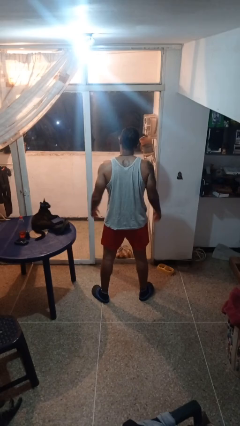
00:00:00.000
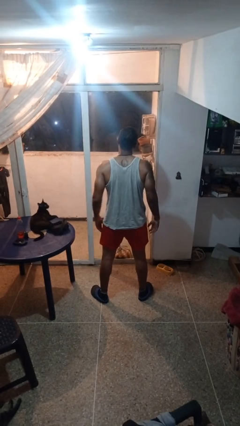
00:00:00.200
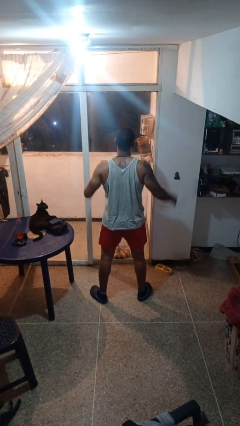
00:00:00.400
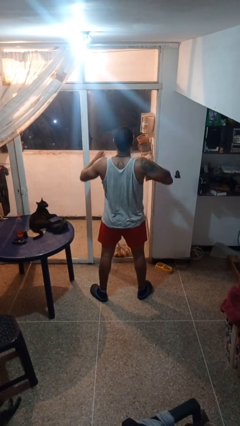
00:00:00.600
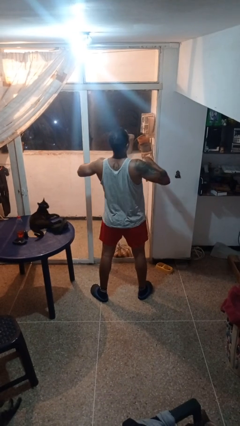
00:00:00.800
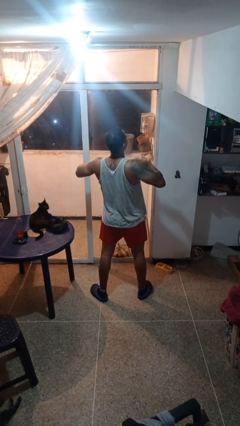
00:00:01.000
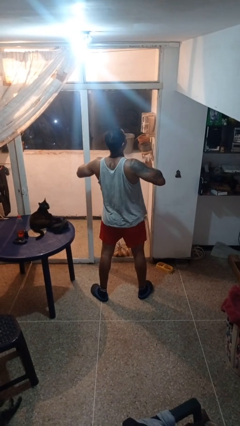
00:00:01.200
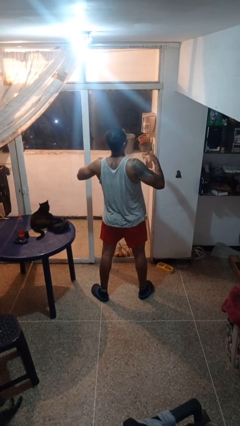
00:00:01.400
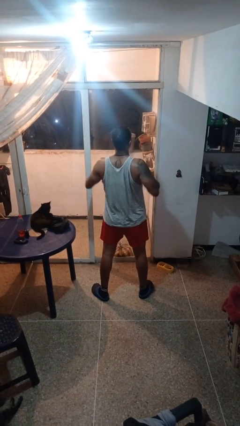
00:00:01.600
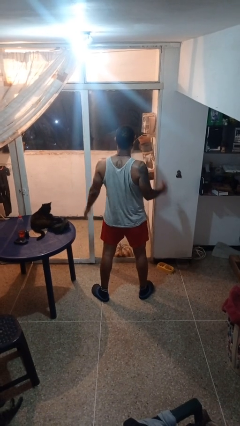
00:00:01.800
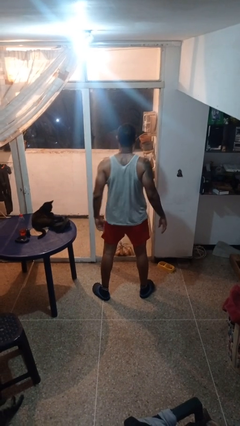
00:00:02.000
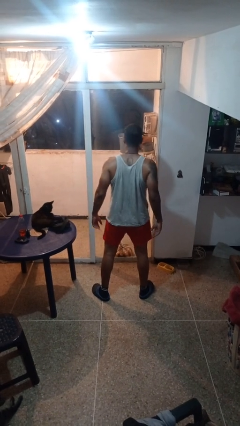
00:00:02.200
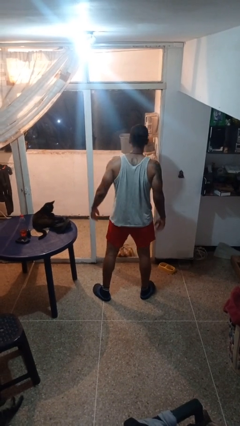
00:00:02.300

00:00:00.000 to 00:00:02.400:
person drums on chest

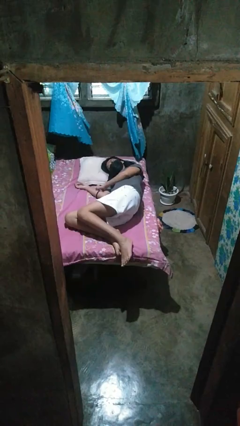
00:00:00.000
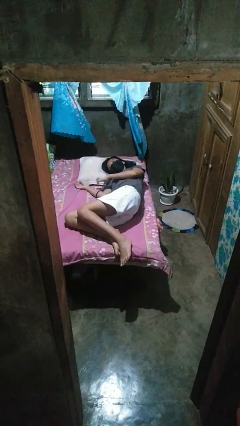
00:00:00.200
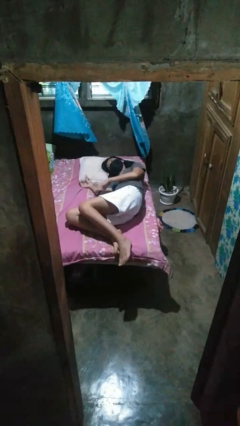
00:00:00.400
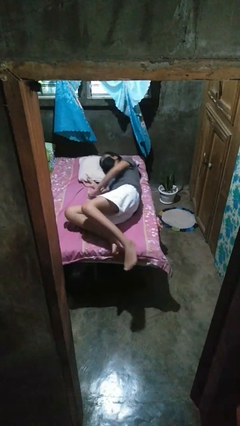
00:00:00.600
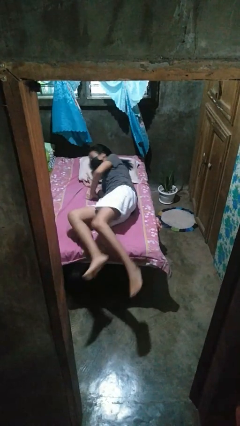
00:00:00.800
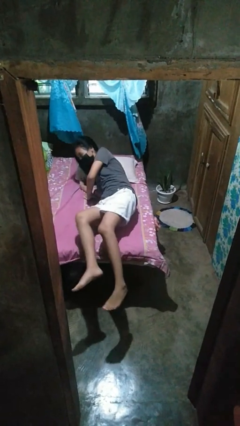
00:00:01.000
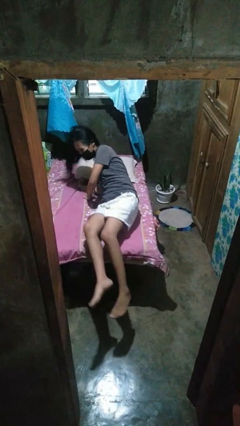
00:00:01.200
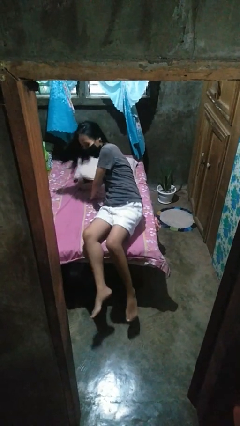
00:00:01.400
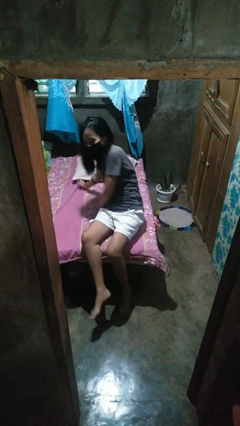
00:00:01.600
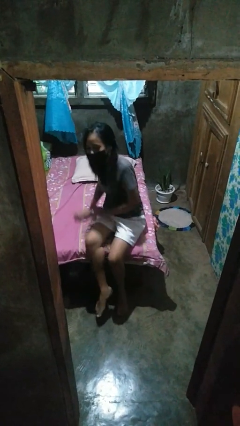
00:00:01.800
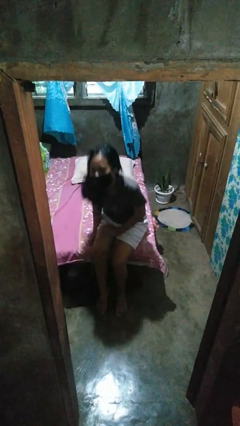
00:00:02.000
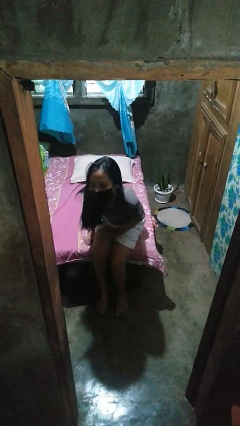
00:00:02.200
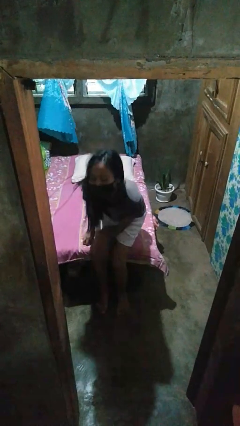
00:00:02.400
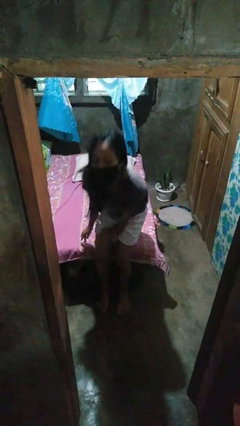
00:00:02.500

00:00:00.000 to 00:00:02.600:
person stands up

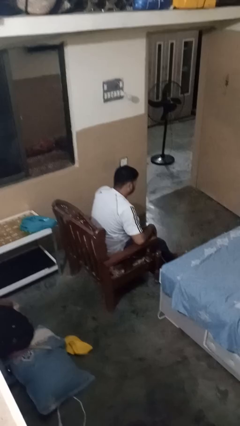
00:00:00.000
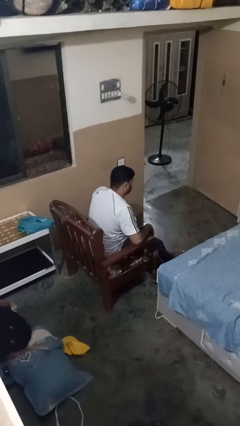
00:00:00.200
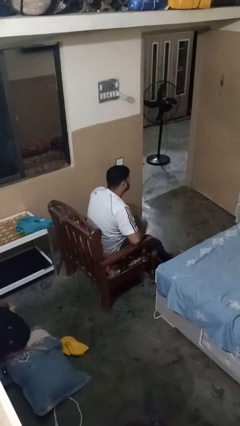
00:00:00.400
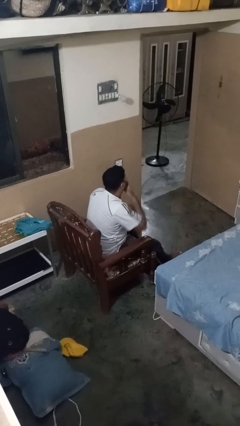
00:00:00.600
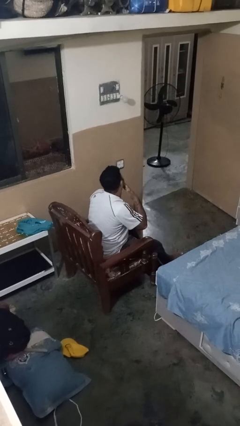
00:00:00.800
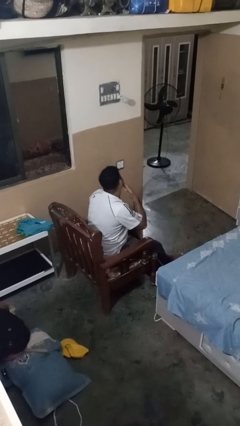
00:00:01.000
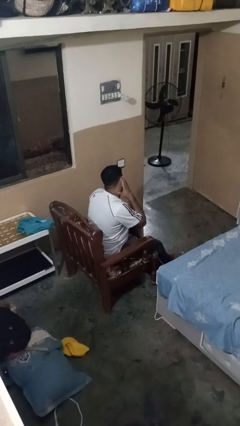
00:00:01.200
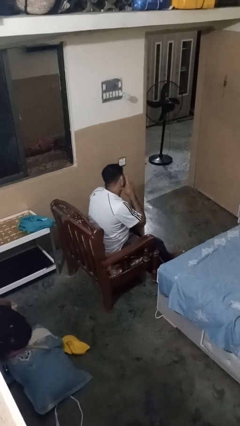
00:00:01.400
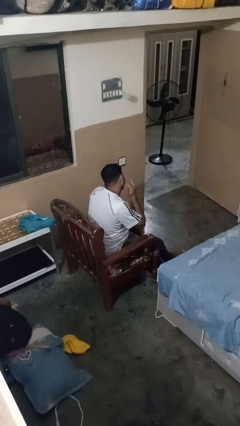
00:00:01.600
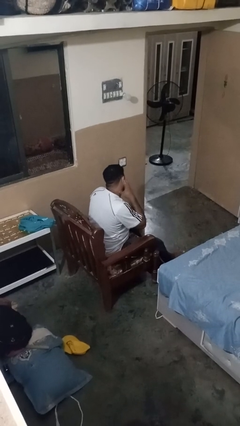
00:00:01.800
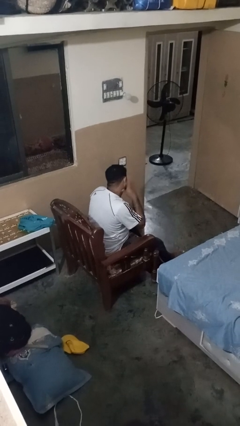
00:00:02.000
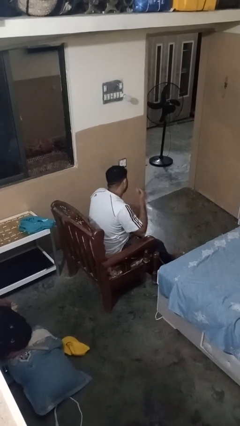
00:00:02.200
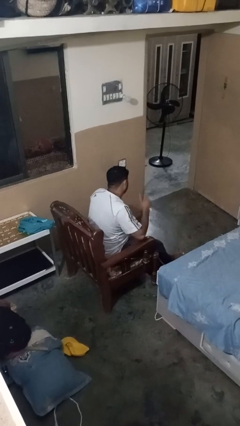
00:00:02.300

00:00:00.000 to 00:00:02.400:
person swats bug

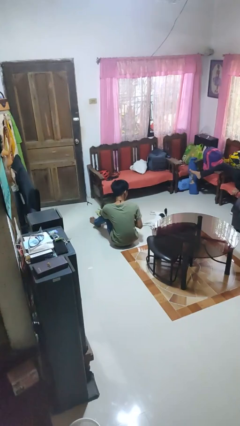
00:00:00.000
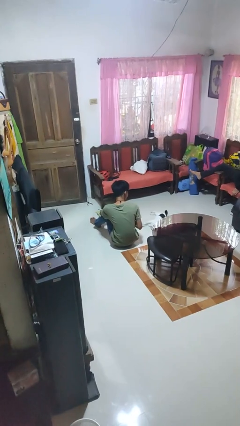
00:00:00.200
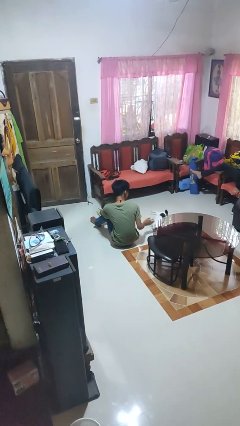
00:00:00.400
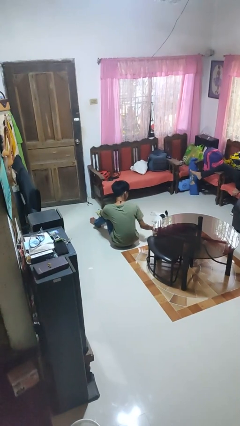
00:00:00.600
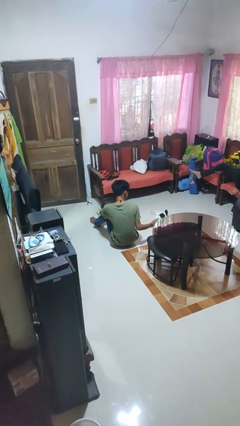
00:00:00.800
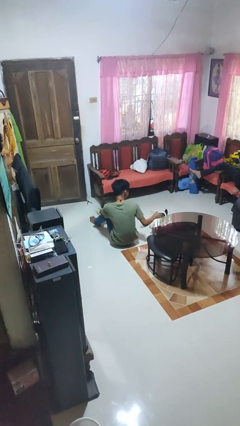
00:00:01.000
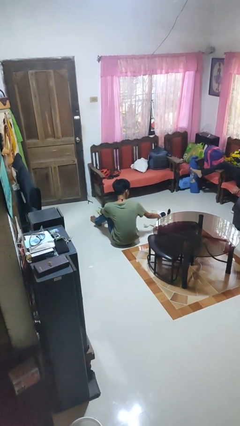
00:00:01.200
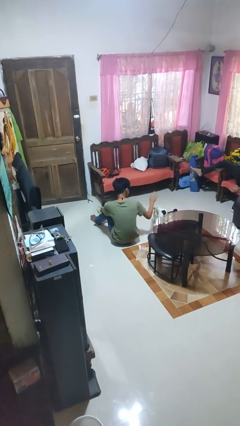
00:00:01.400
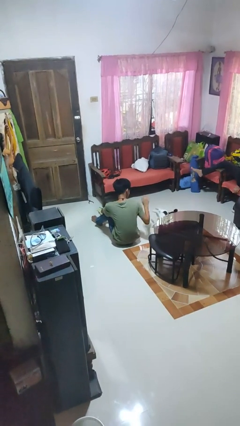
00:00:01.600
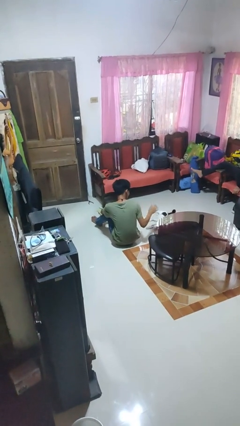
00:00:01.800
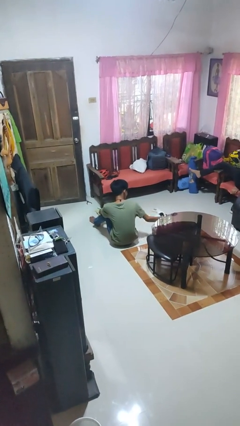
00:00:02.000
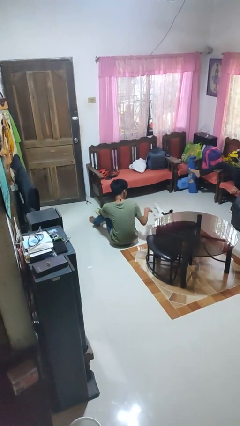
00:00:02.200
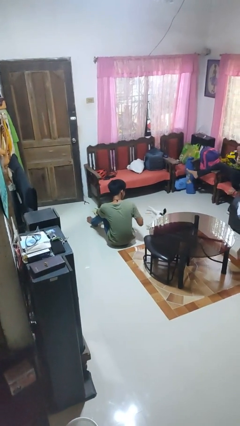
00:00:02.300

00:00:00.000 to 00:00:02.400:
person pets cat

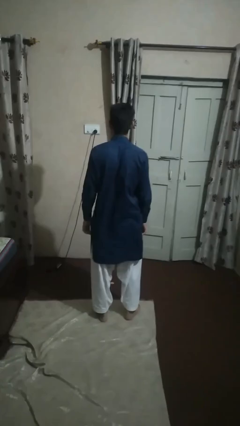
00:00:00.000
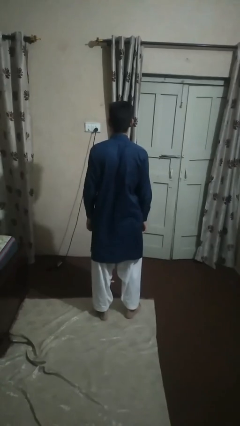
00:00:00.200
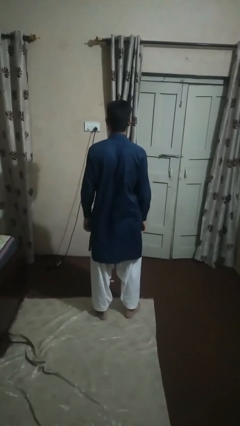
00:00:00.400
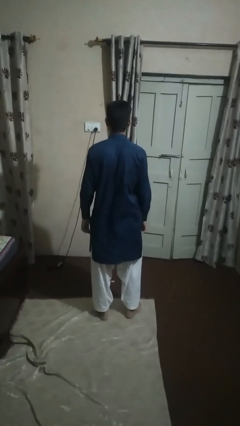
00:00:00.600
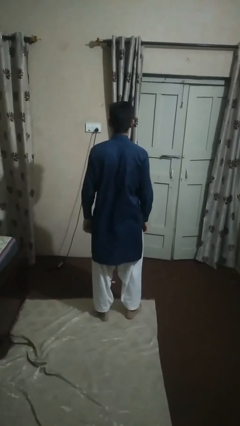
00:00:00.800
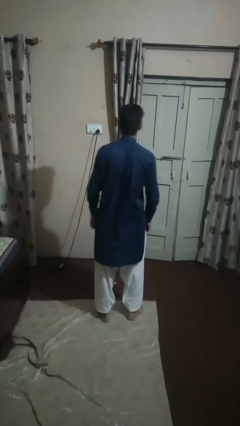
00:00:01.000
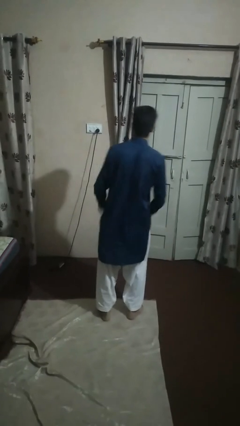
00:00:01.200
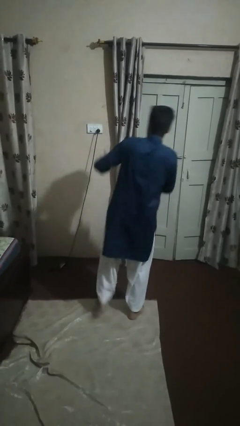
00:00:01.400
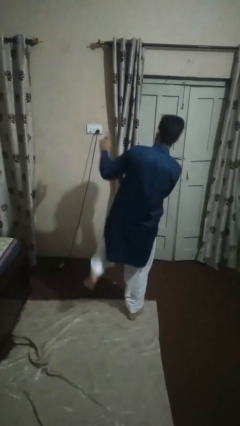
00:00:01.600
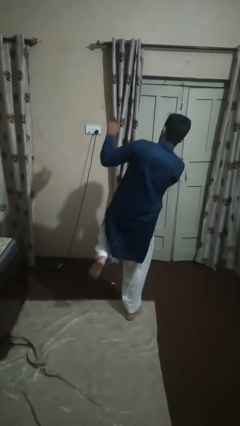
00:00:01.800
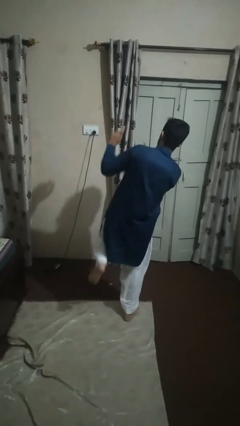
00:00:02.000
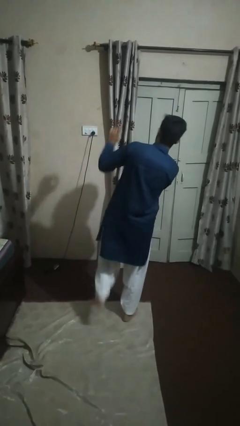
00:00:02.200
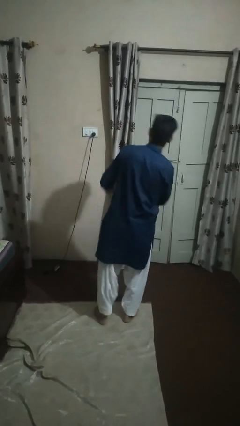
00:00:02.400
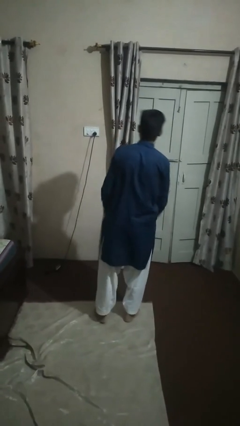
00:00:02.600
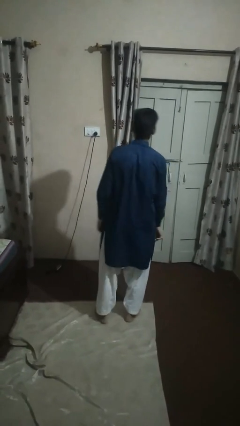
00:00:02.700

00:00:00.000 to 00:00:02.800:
person dances in place

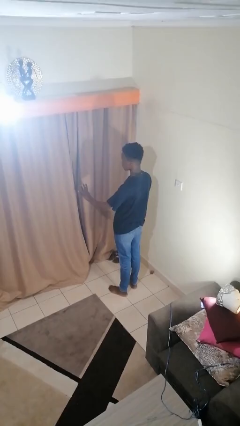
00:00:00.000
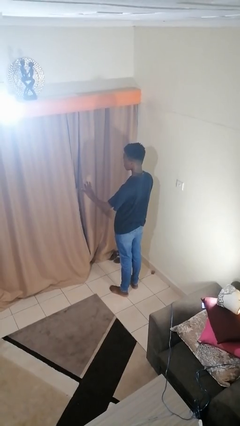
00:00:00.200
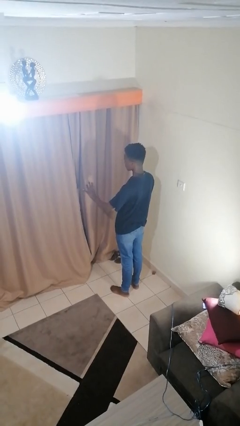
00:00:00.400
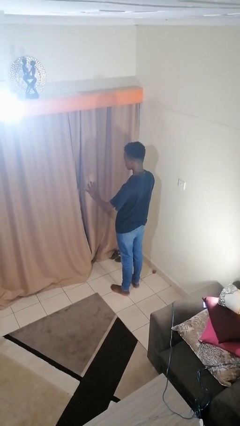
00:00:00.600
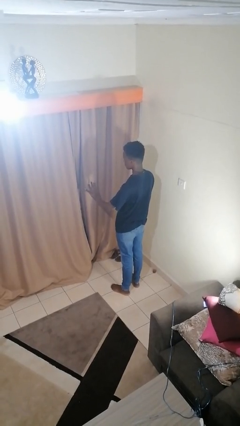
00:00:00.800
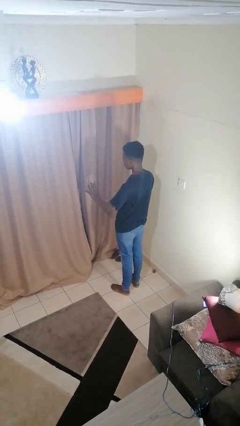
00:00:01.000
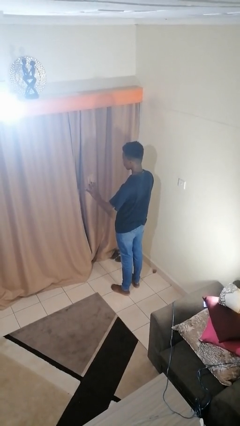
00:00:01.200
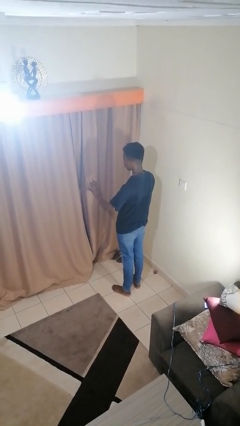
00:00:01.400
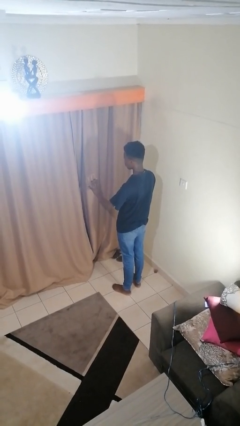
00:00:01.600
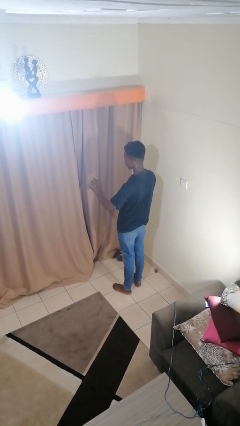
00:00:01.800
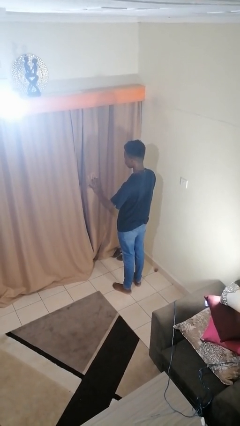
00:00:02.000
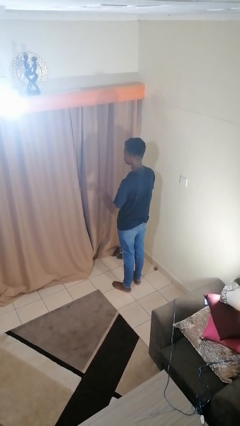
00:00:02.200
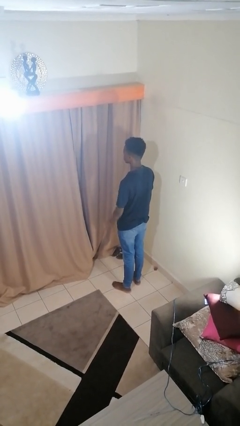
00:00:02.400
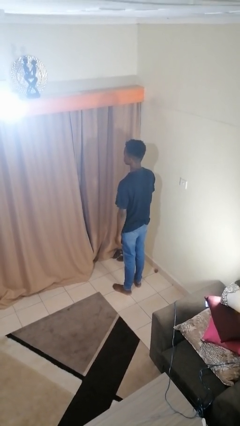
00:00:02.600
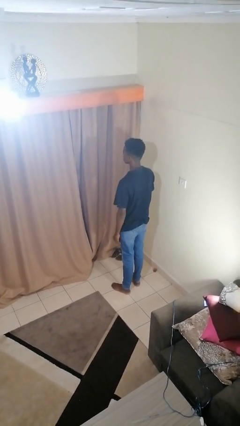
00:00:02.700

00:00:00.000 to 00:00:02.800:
person gestures number four

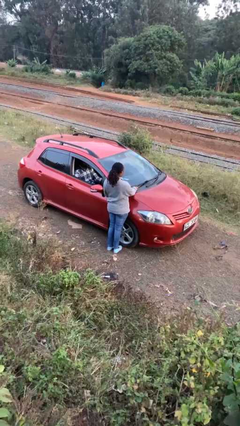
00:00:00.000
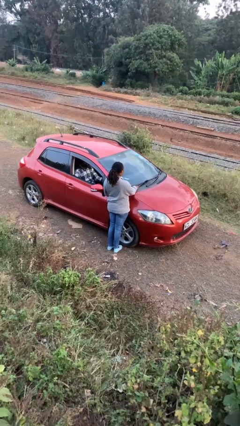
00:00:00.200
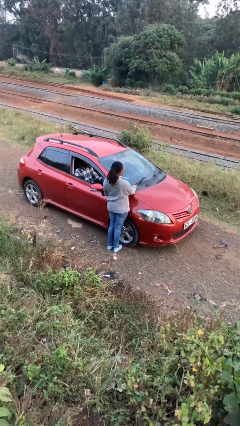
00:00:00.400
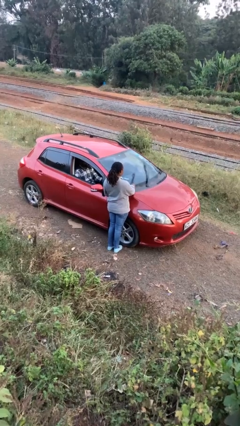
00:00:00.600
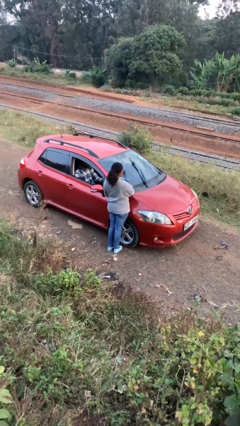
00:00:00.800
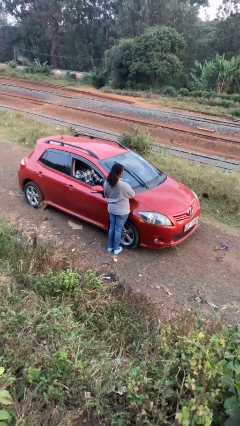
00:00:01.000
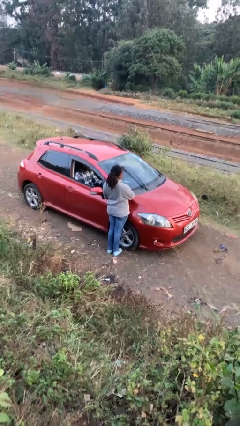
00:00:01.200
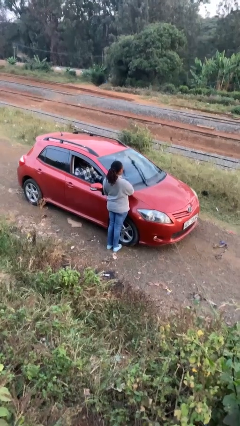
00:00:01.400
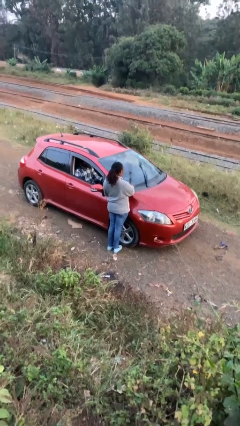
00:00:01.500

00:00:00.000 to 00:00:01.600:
person flips up car wipers

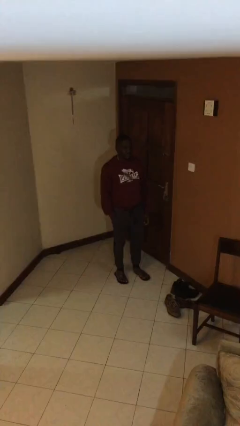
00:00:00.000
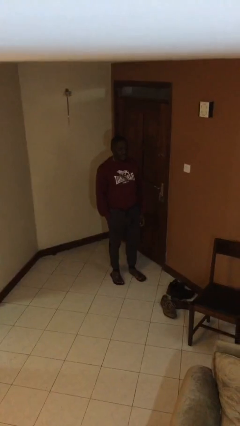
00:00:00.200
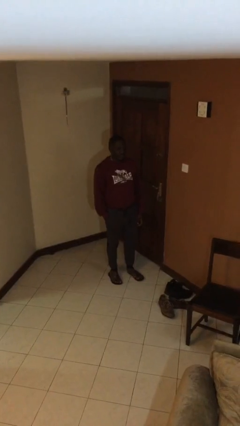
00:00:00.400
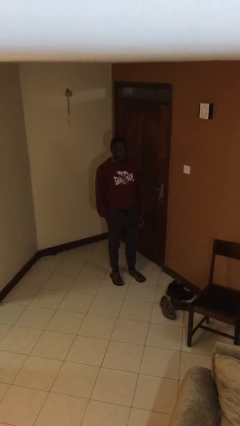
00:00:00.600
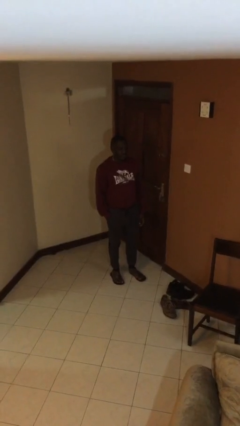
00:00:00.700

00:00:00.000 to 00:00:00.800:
person closes door with hip
